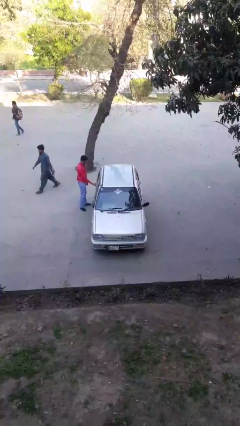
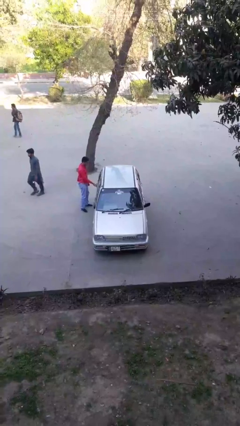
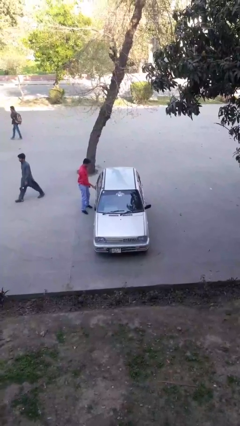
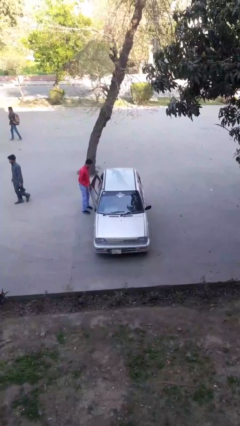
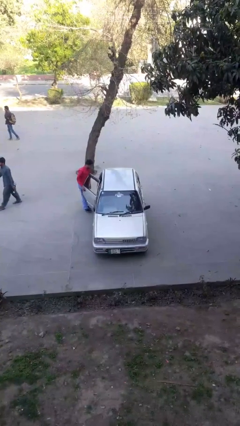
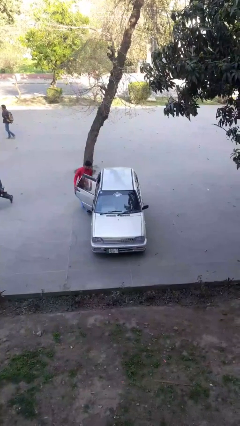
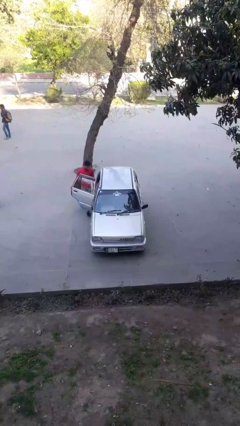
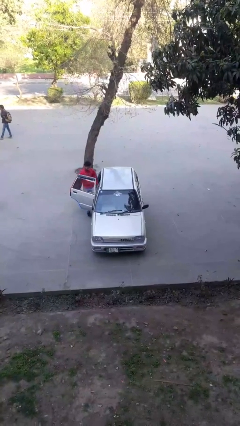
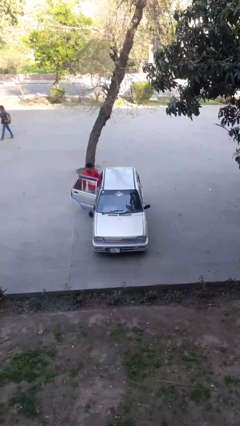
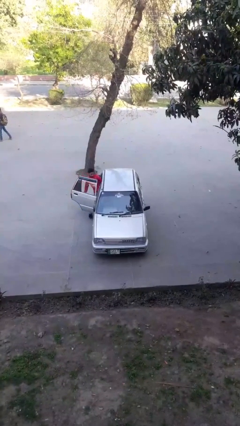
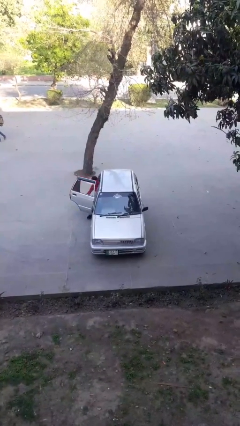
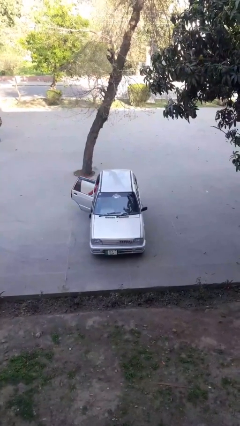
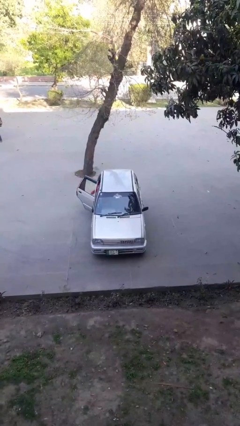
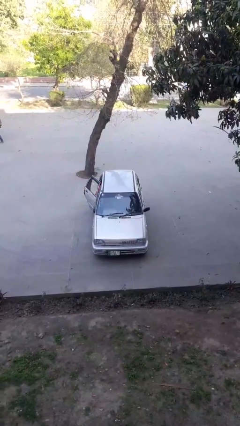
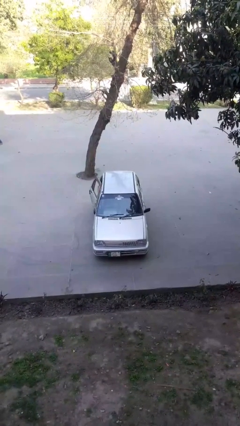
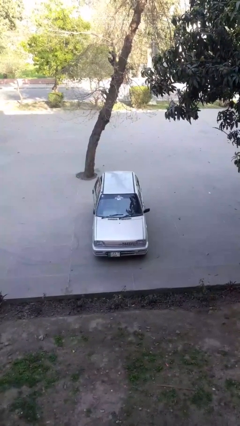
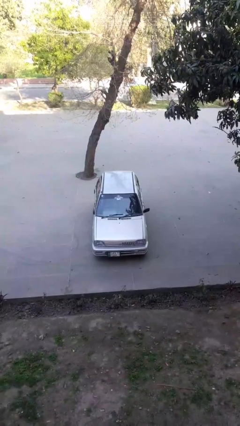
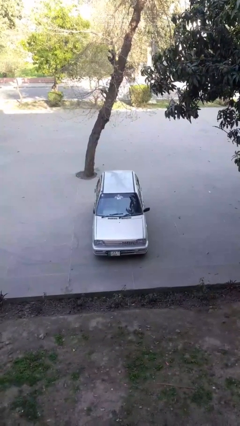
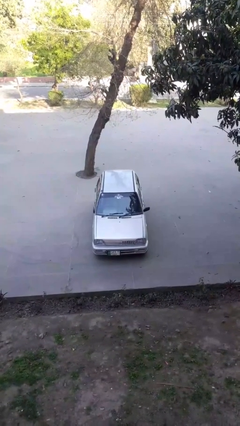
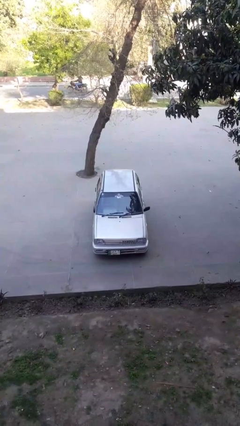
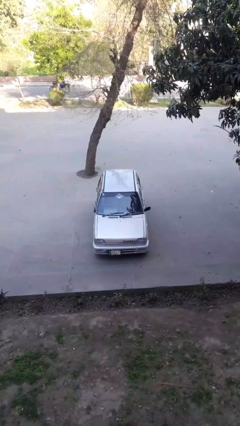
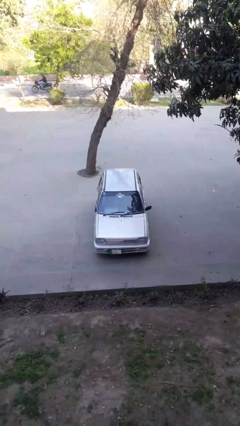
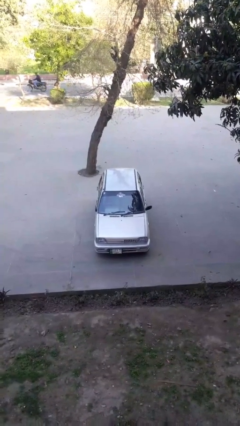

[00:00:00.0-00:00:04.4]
car picks up person

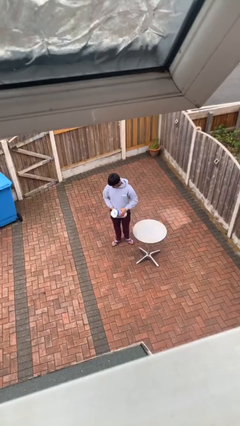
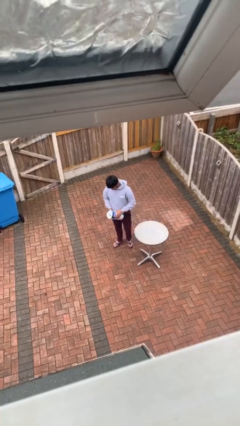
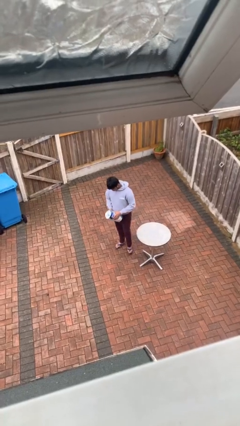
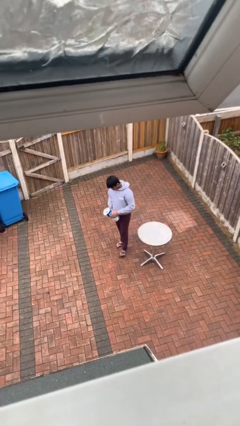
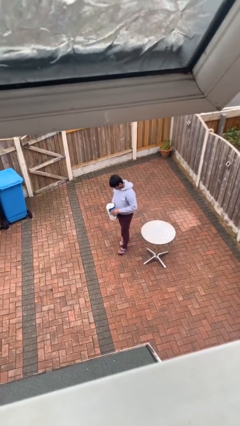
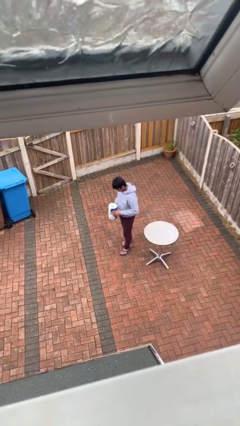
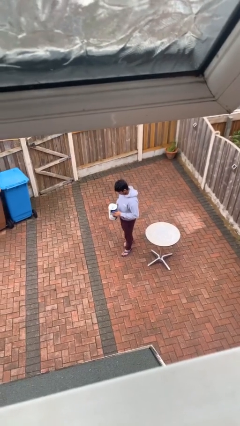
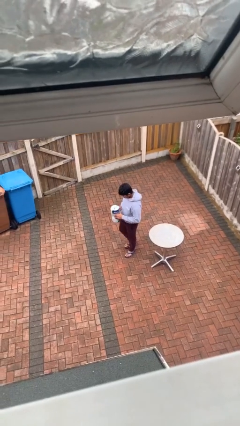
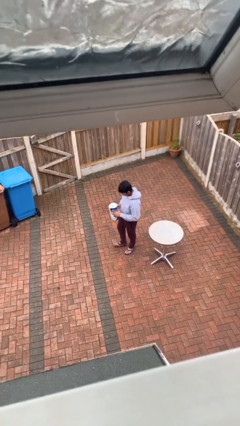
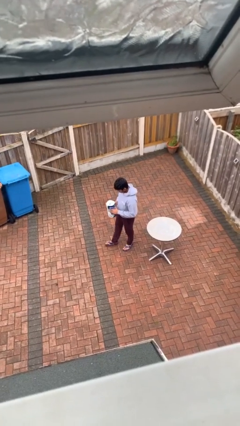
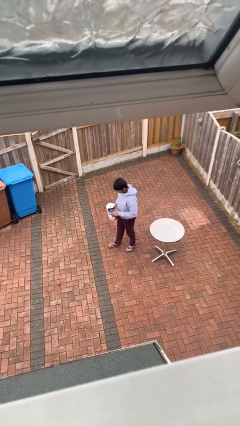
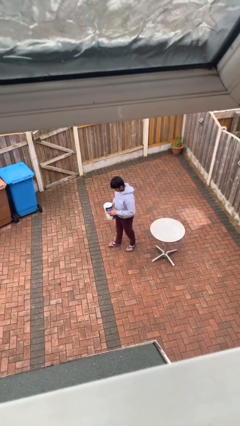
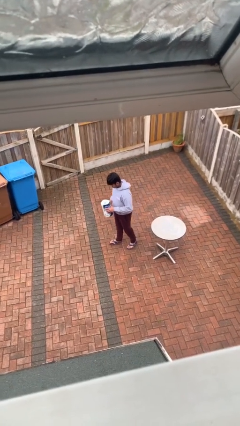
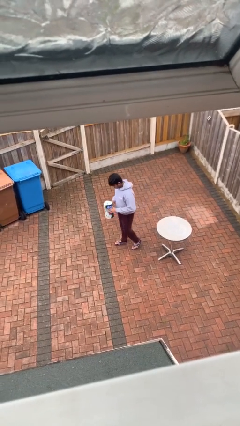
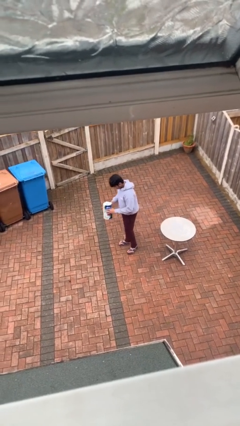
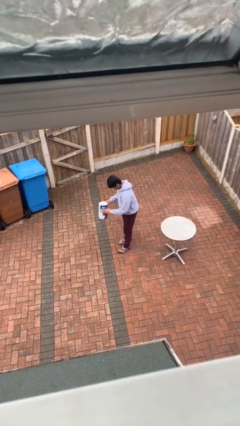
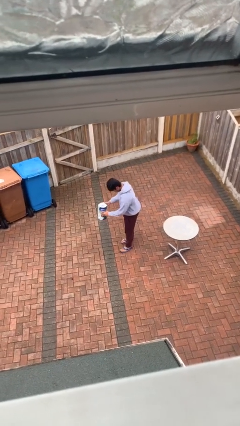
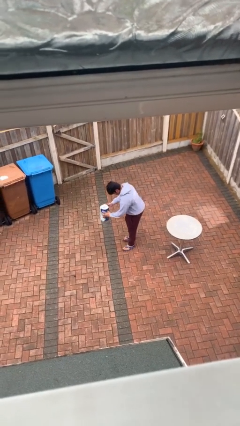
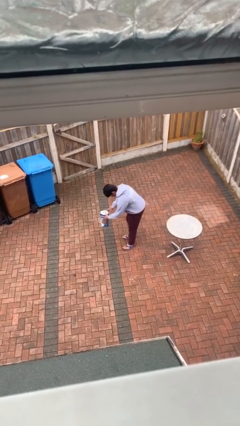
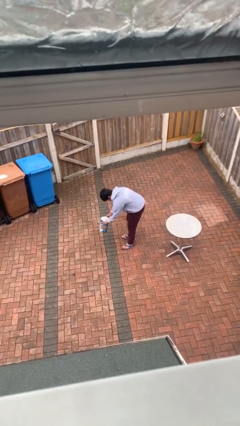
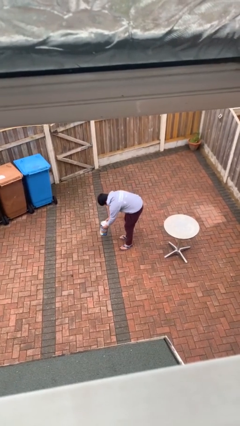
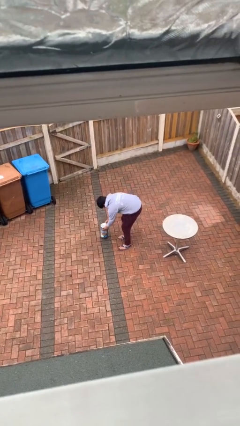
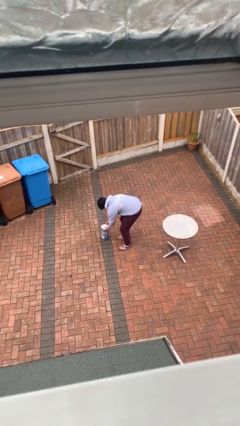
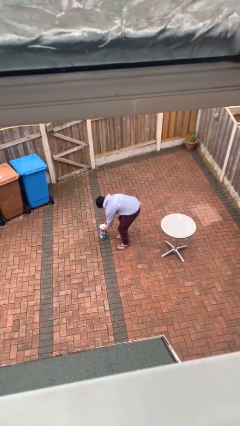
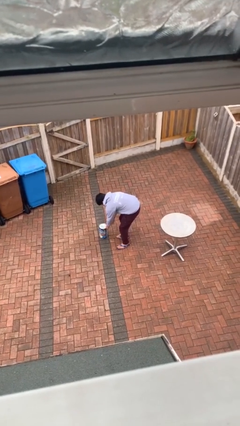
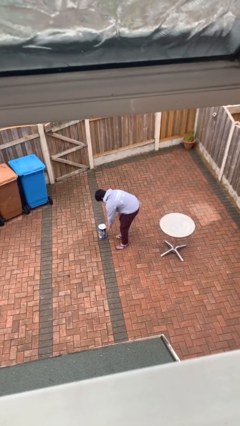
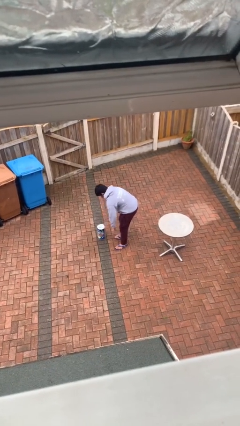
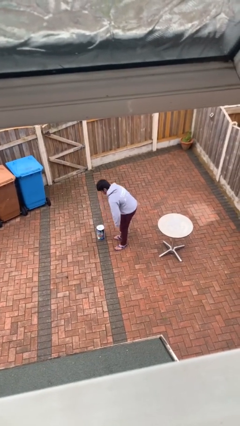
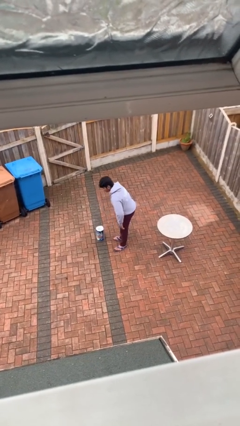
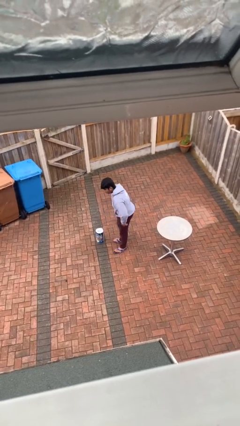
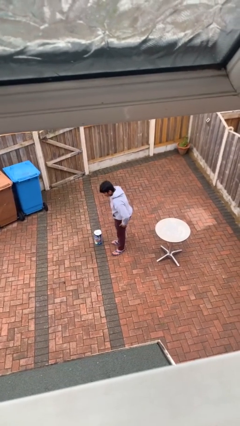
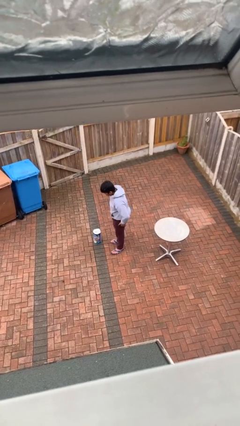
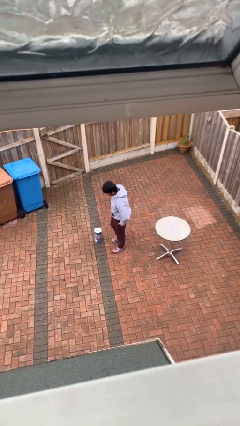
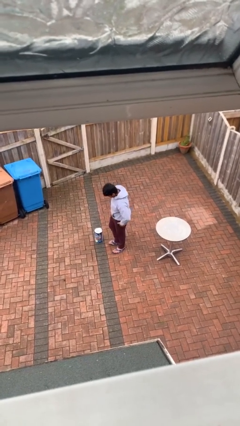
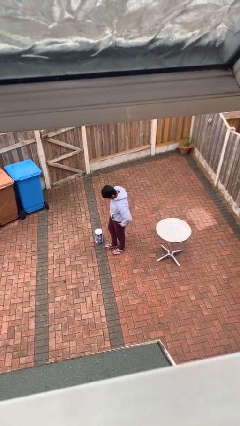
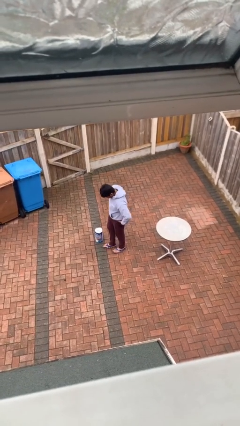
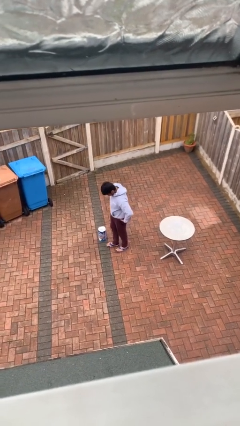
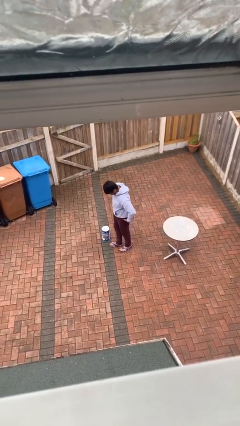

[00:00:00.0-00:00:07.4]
person puts down object on floor

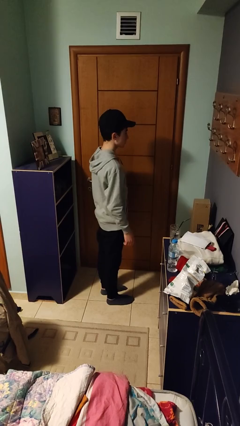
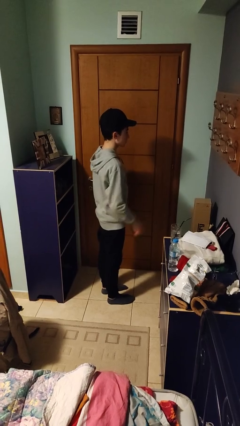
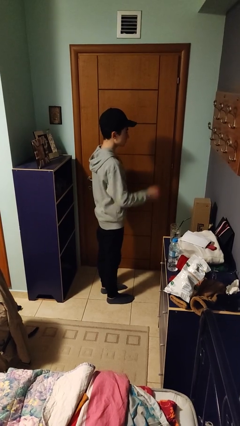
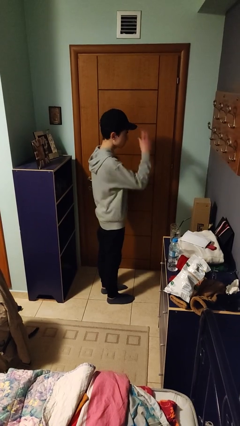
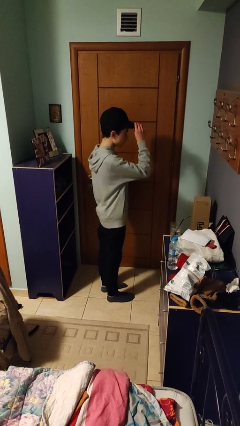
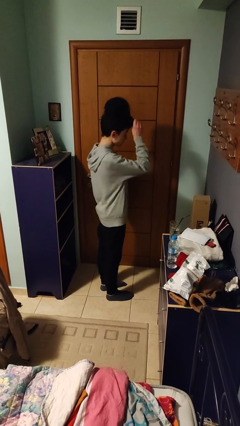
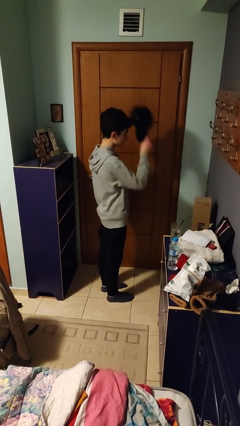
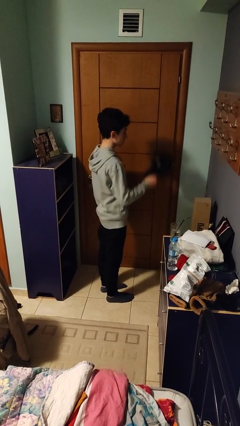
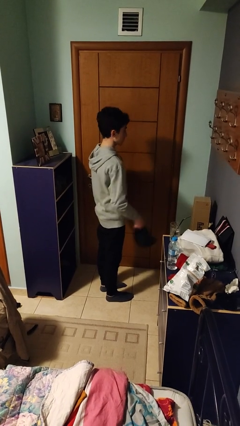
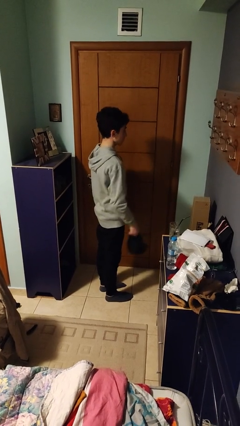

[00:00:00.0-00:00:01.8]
person takes off hat

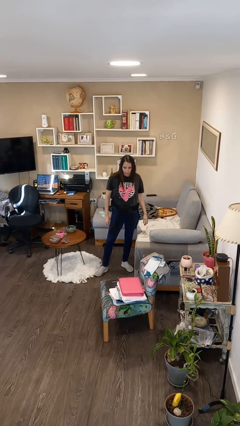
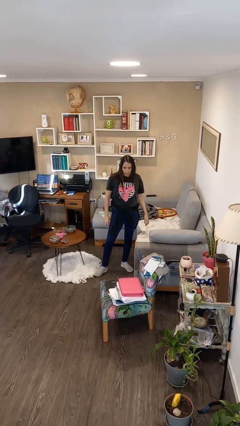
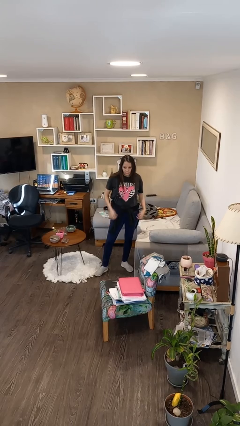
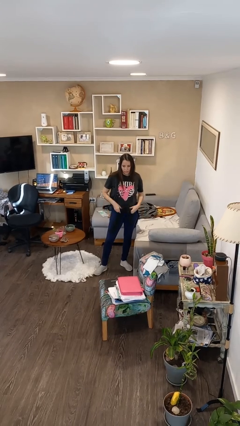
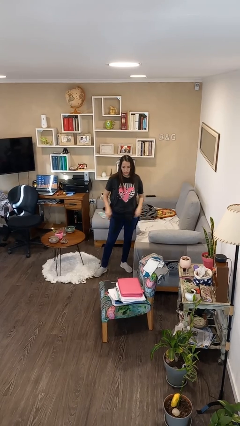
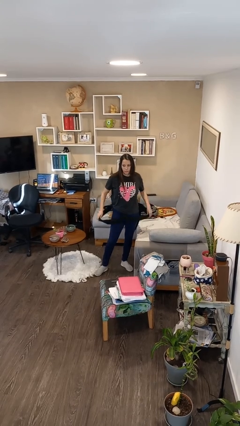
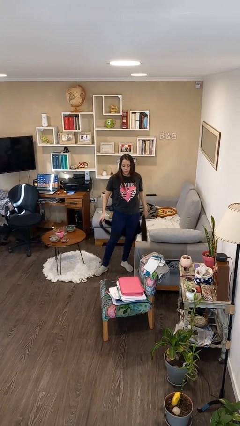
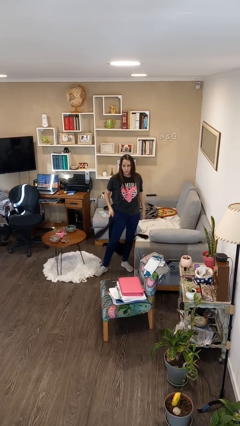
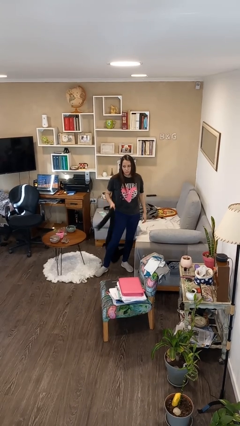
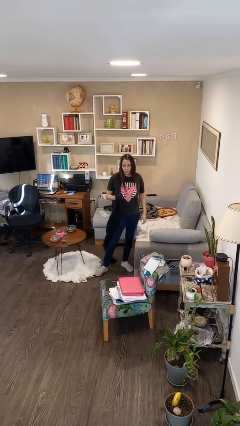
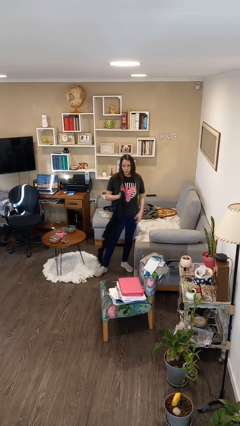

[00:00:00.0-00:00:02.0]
person unties jacket around waist

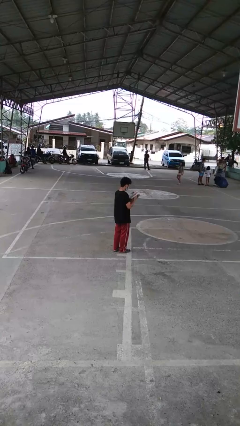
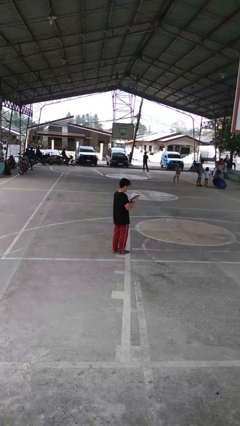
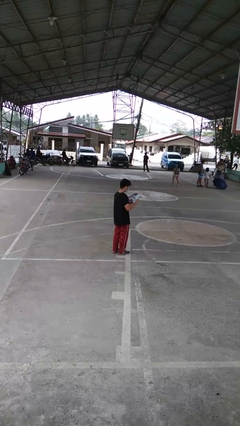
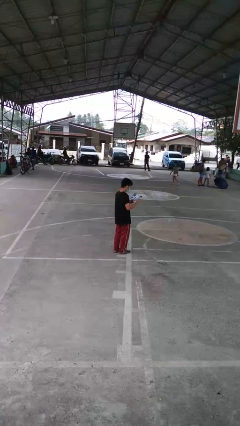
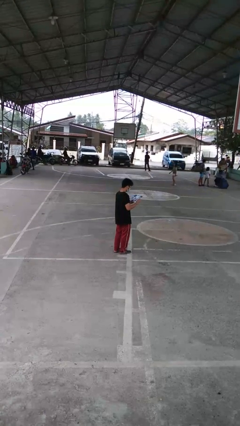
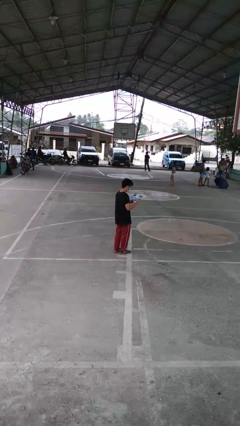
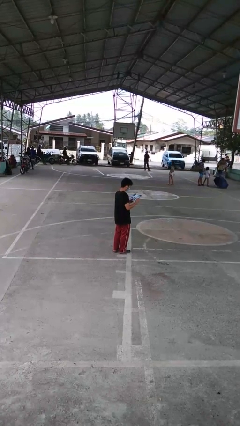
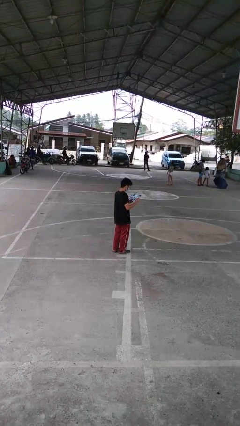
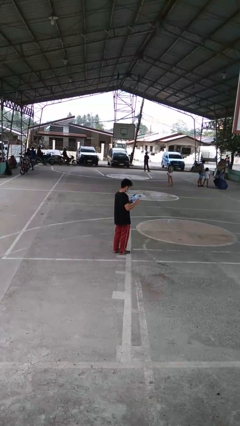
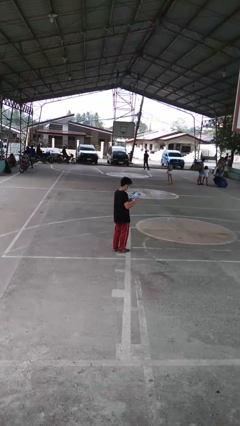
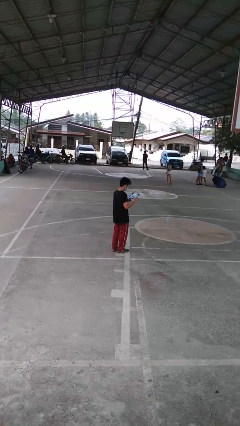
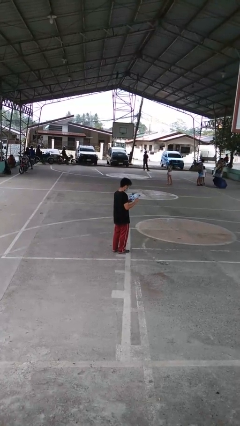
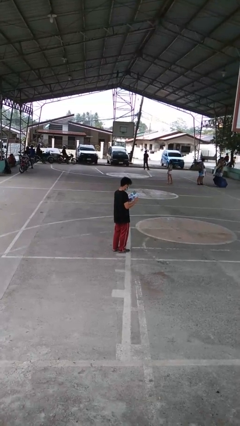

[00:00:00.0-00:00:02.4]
person reads magazine
